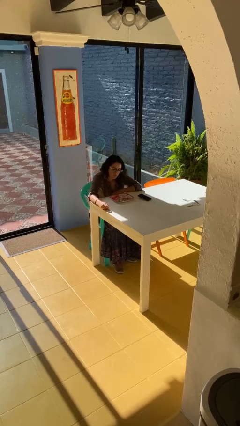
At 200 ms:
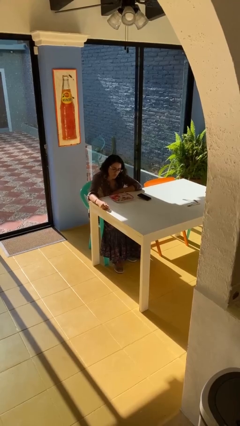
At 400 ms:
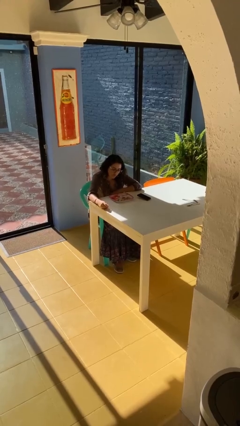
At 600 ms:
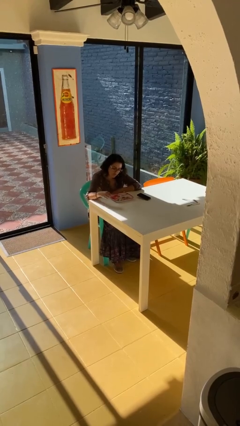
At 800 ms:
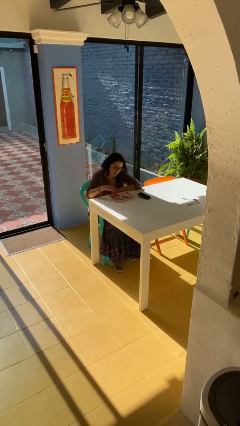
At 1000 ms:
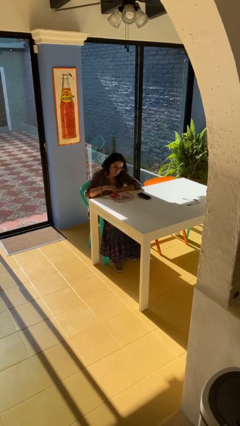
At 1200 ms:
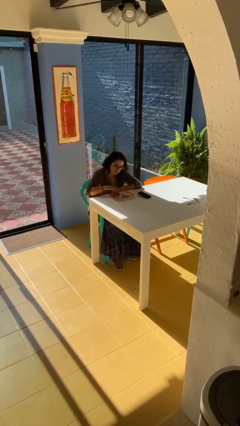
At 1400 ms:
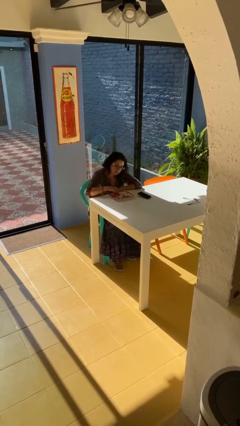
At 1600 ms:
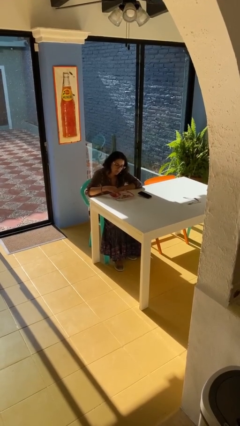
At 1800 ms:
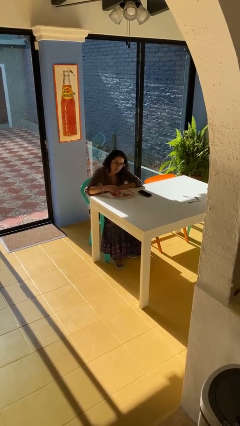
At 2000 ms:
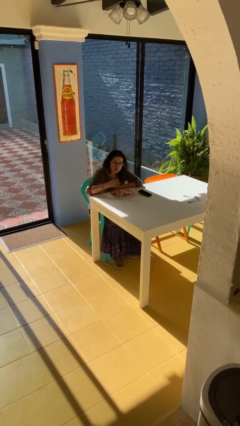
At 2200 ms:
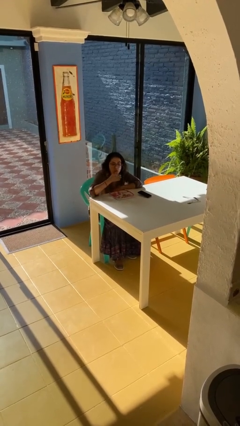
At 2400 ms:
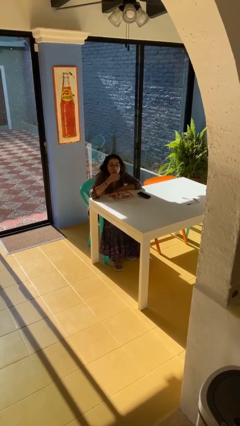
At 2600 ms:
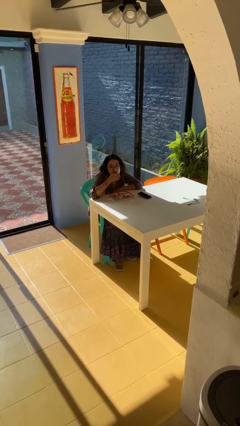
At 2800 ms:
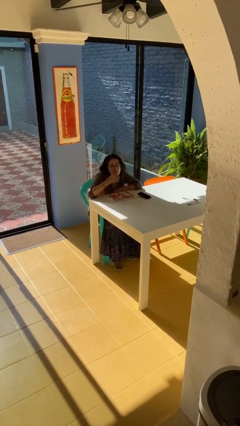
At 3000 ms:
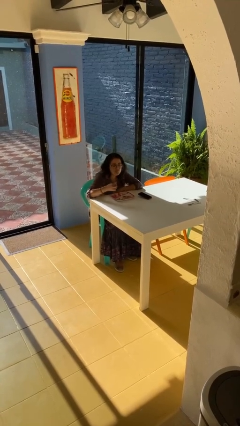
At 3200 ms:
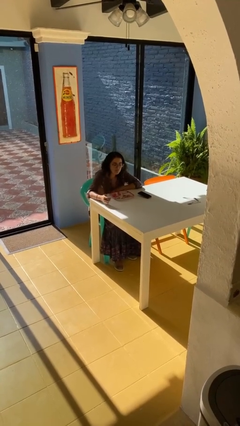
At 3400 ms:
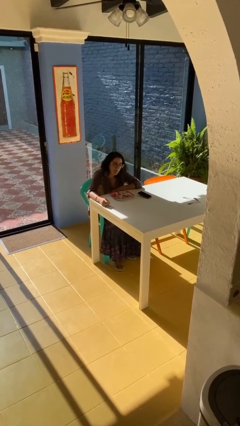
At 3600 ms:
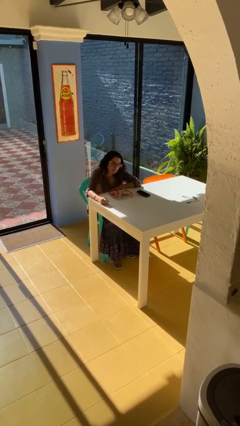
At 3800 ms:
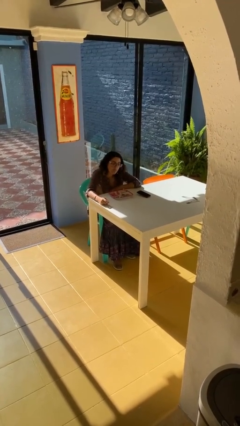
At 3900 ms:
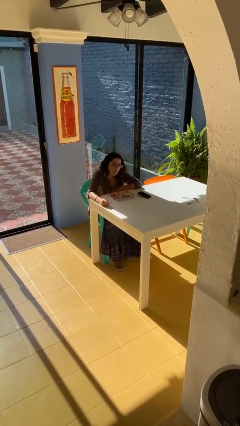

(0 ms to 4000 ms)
person eats with hands

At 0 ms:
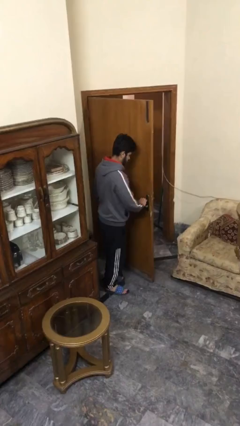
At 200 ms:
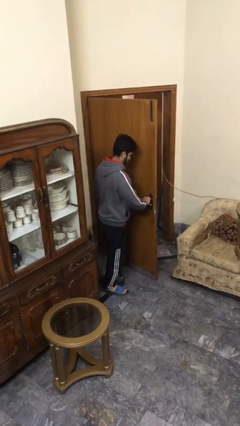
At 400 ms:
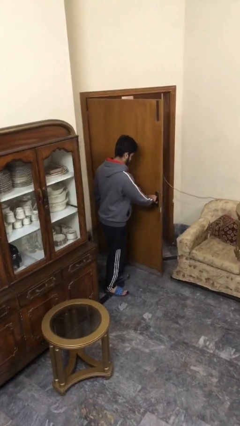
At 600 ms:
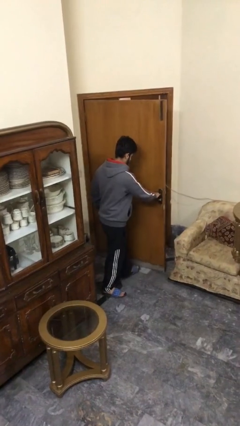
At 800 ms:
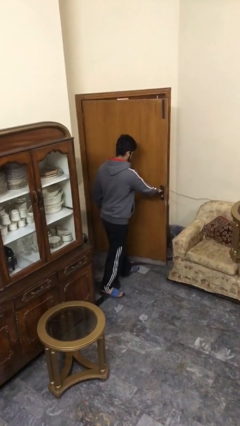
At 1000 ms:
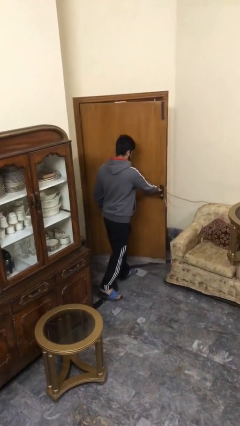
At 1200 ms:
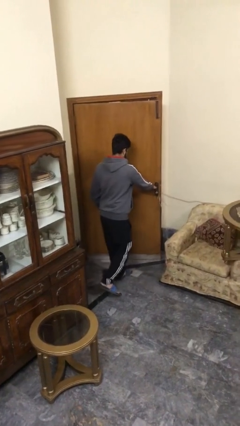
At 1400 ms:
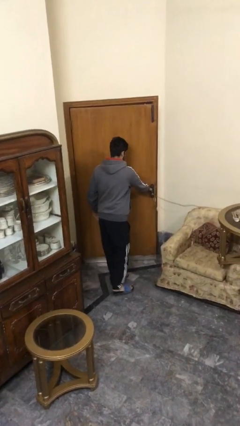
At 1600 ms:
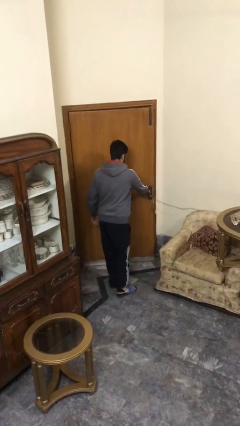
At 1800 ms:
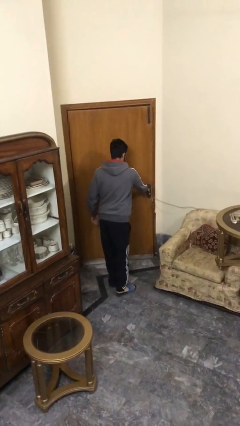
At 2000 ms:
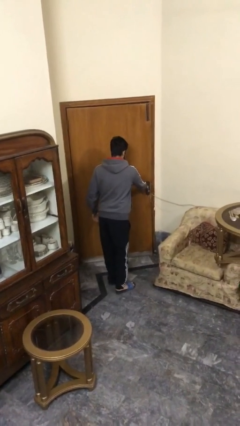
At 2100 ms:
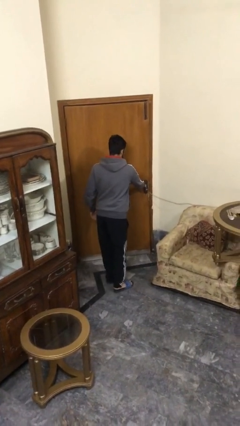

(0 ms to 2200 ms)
person closes facility door

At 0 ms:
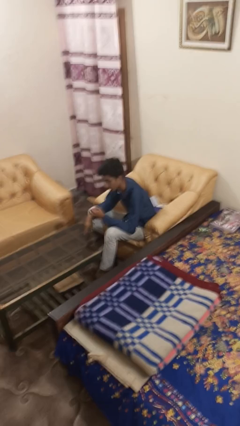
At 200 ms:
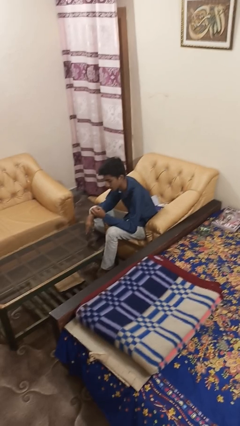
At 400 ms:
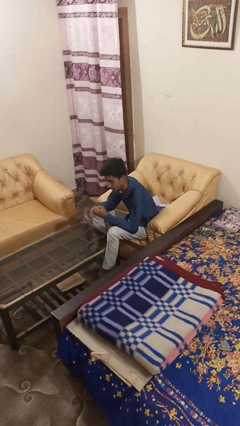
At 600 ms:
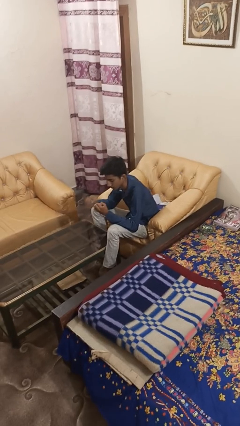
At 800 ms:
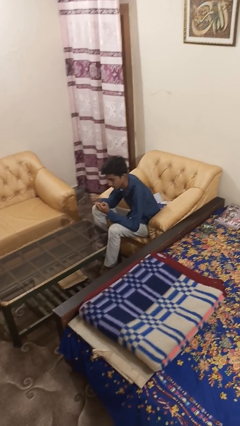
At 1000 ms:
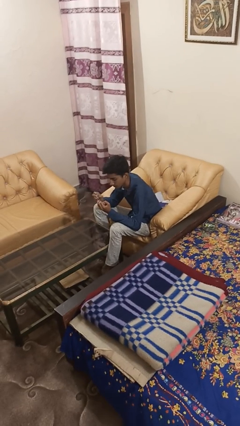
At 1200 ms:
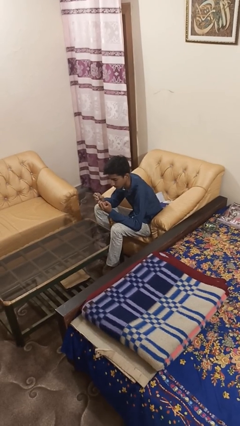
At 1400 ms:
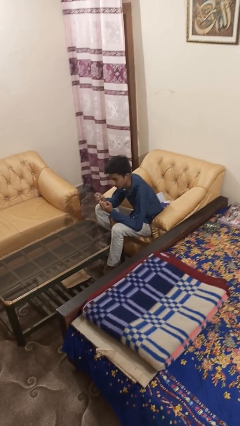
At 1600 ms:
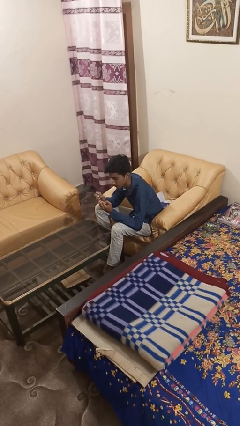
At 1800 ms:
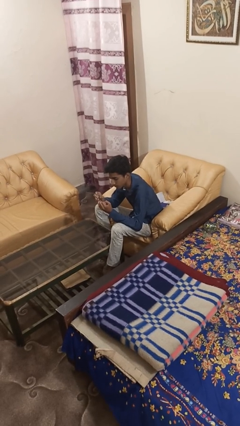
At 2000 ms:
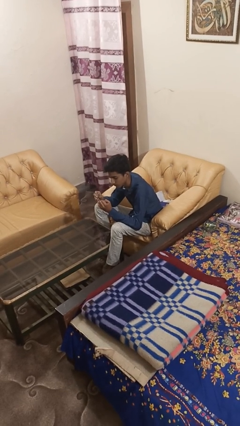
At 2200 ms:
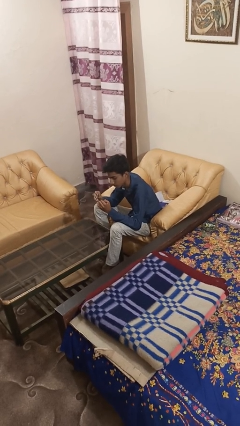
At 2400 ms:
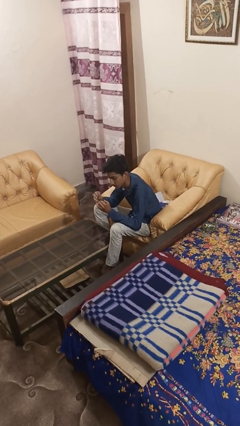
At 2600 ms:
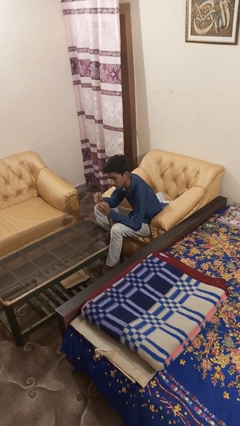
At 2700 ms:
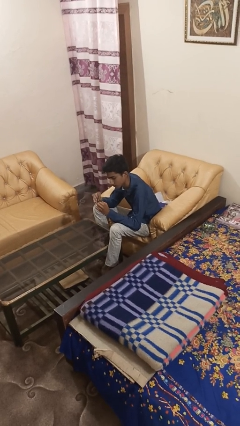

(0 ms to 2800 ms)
person clips fingernails

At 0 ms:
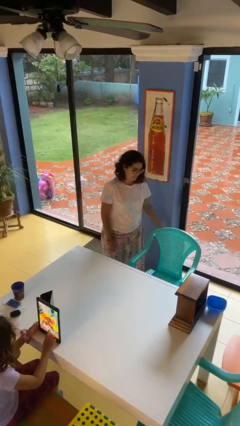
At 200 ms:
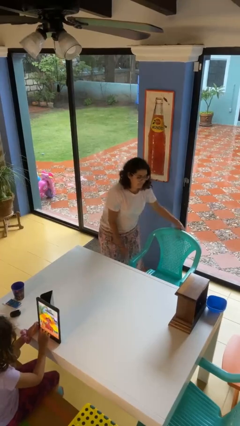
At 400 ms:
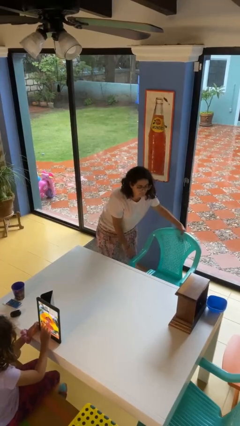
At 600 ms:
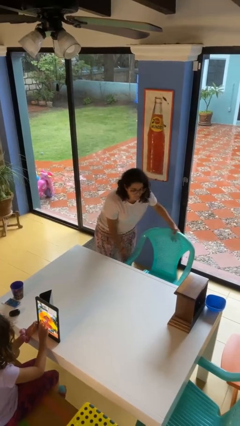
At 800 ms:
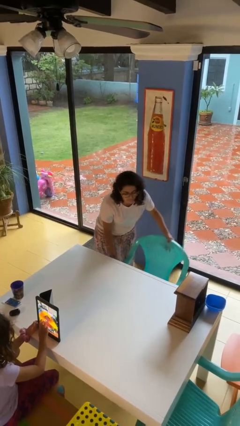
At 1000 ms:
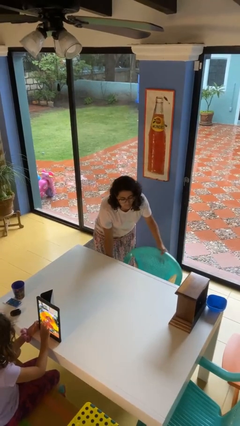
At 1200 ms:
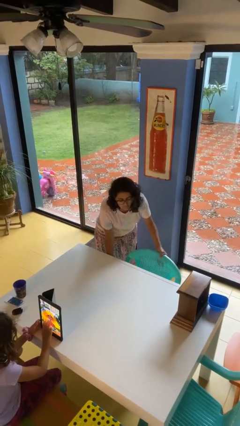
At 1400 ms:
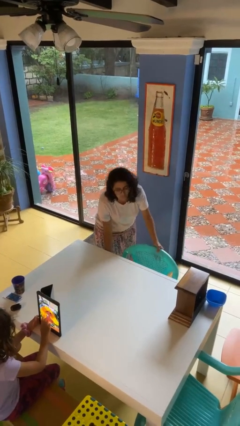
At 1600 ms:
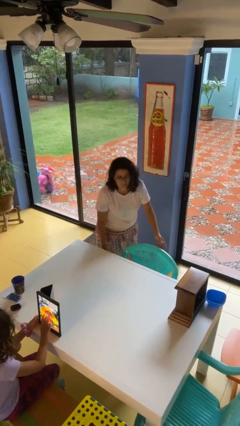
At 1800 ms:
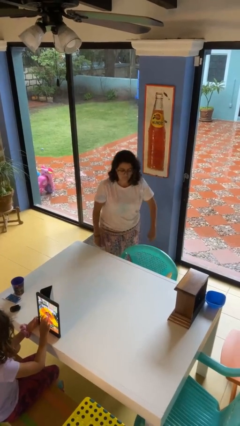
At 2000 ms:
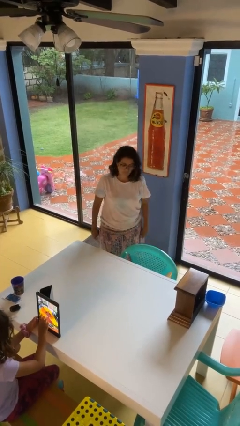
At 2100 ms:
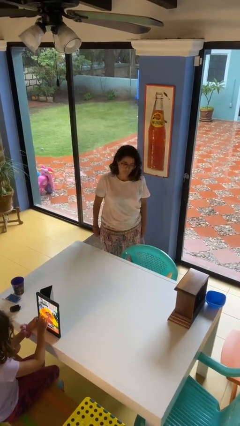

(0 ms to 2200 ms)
person pushes in chair

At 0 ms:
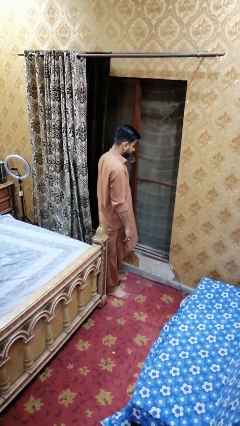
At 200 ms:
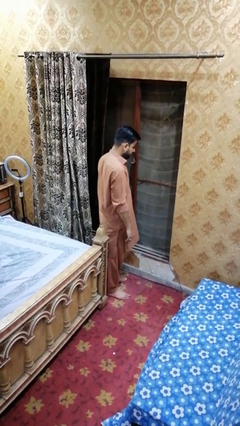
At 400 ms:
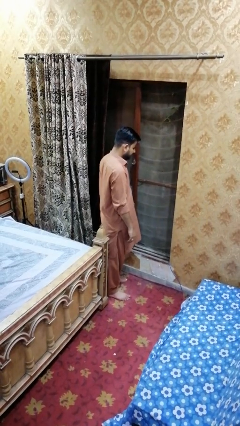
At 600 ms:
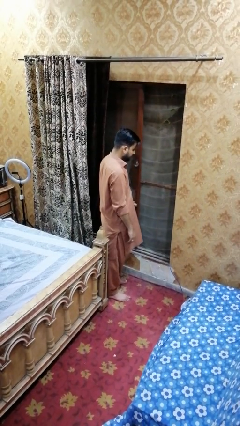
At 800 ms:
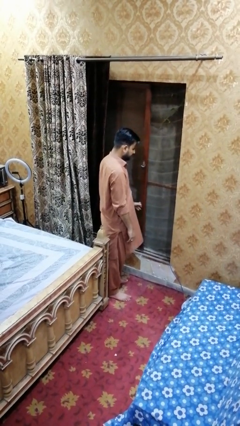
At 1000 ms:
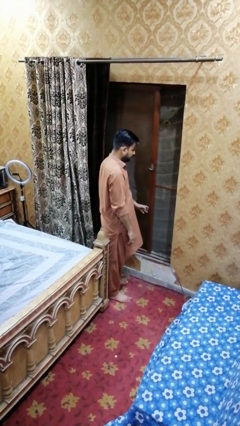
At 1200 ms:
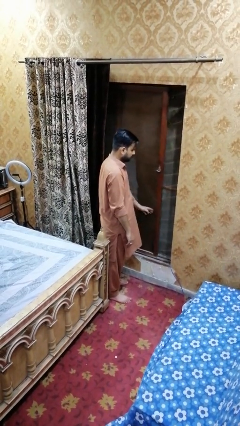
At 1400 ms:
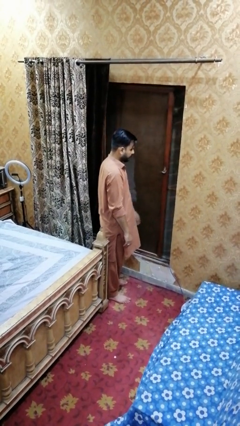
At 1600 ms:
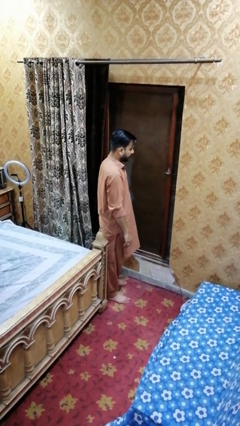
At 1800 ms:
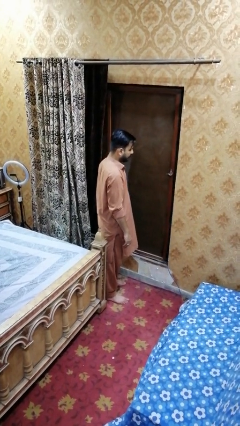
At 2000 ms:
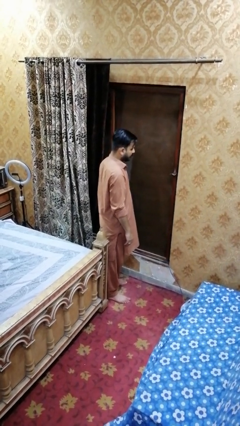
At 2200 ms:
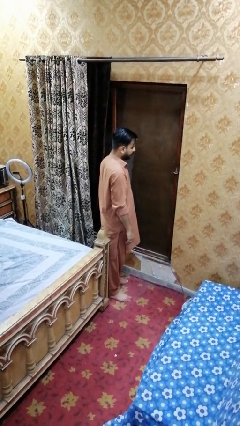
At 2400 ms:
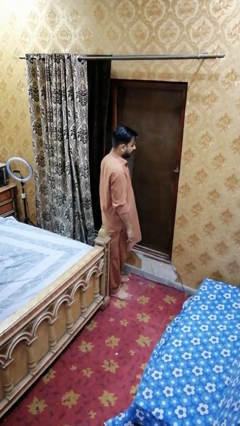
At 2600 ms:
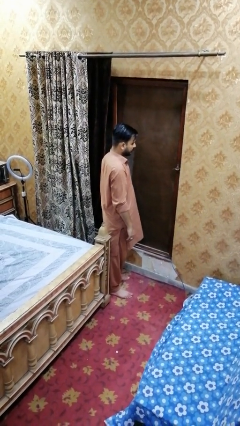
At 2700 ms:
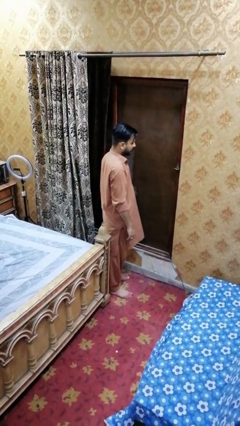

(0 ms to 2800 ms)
person closes home window

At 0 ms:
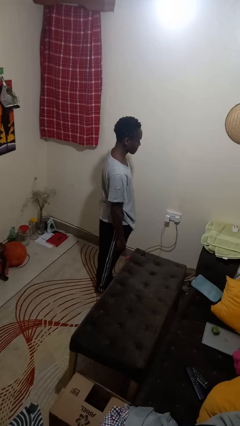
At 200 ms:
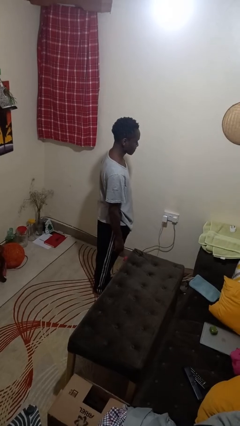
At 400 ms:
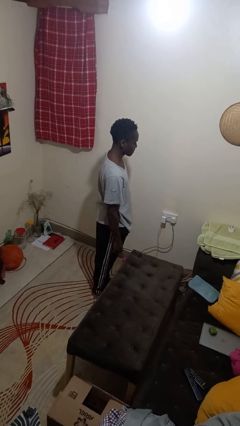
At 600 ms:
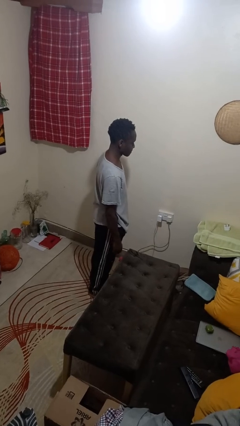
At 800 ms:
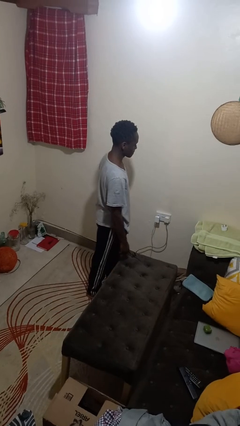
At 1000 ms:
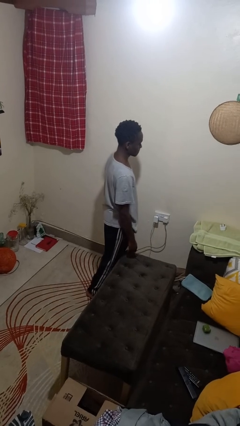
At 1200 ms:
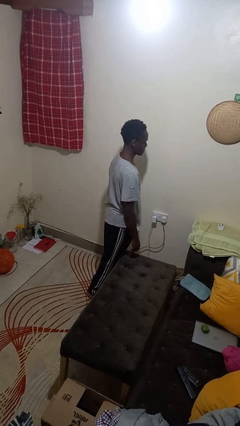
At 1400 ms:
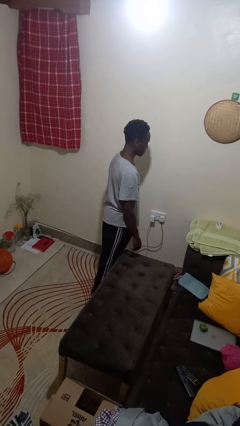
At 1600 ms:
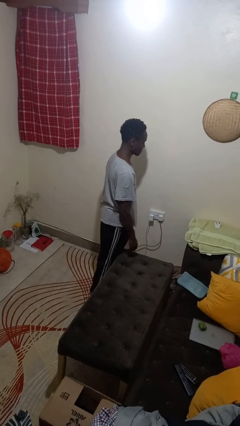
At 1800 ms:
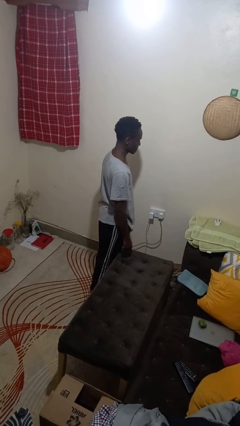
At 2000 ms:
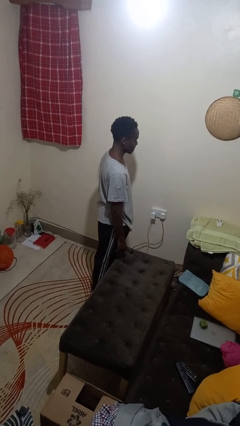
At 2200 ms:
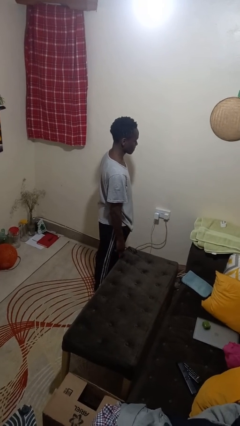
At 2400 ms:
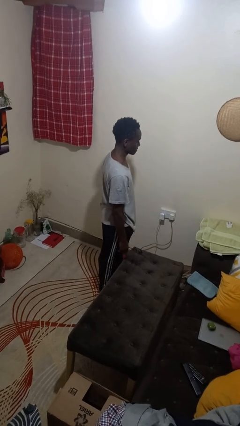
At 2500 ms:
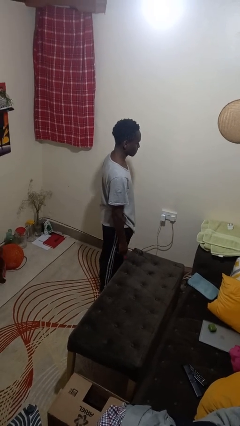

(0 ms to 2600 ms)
person bumps into table

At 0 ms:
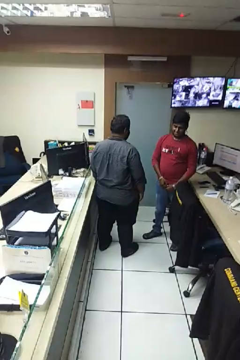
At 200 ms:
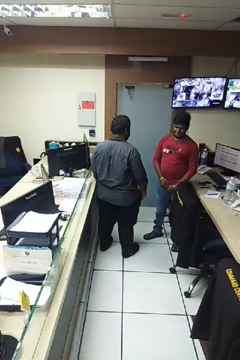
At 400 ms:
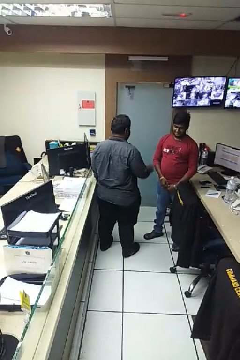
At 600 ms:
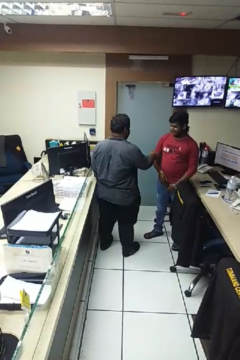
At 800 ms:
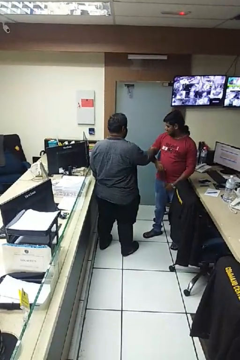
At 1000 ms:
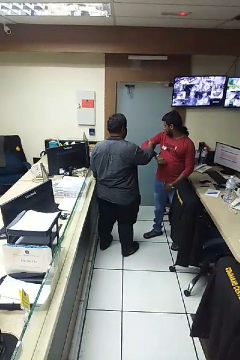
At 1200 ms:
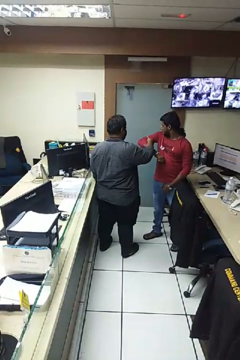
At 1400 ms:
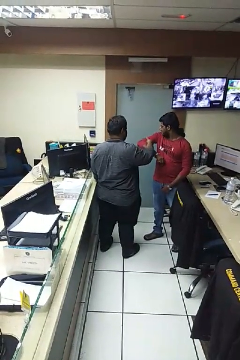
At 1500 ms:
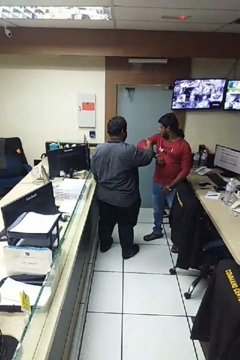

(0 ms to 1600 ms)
person grabs person by bicep
